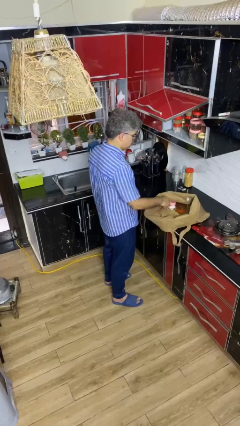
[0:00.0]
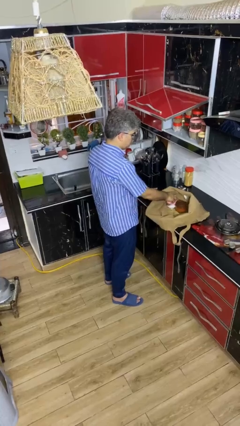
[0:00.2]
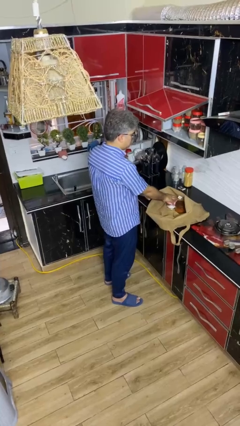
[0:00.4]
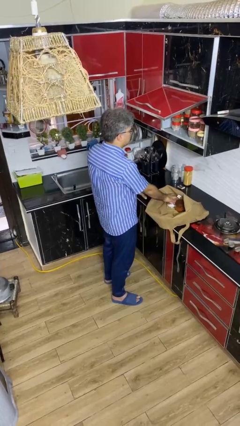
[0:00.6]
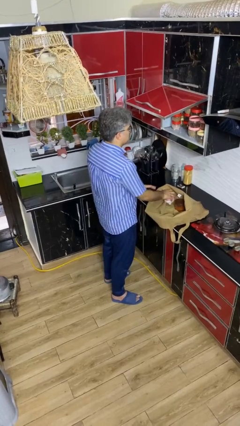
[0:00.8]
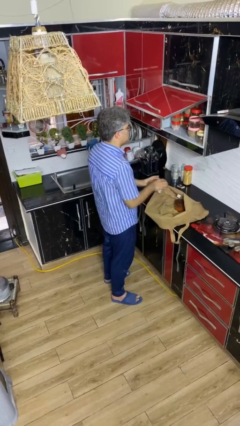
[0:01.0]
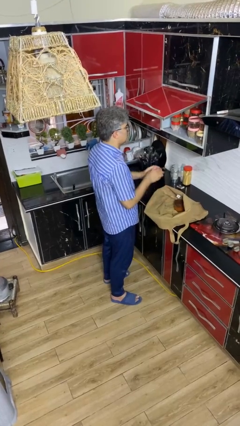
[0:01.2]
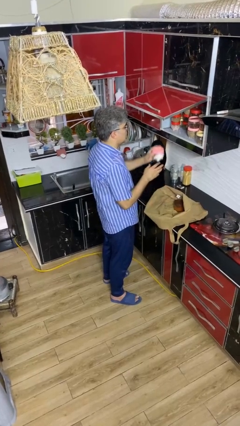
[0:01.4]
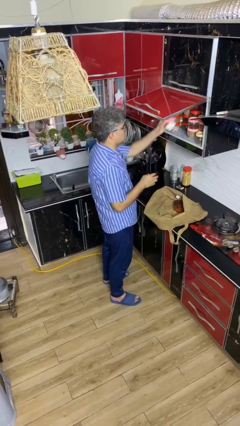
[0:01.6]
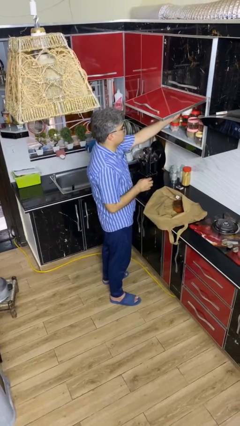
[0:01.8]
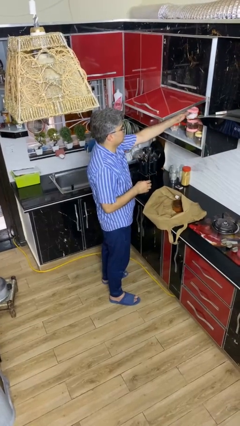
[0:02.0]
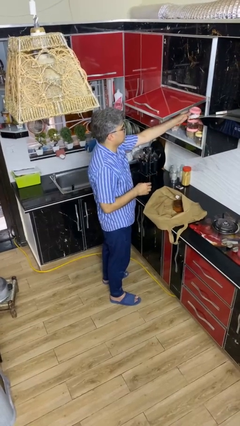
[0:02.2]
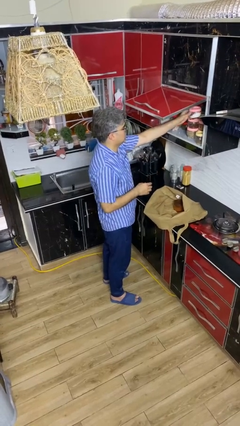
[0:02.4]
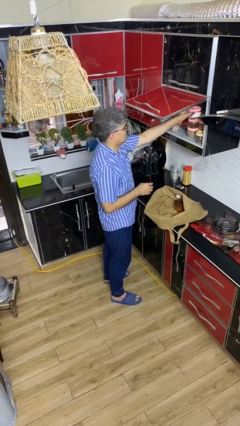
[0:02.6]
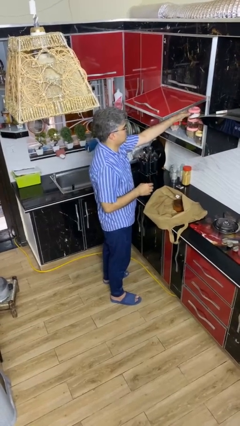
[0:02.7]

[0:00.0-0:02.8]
person loads groceries into cabinet

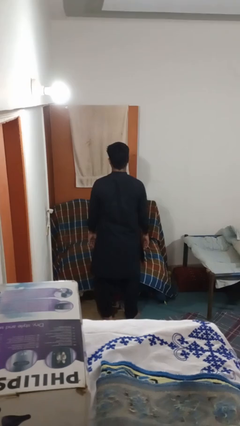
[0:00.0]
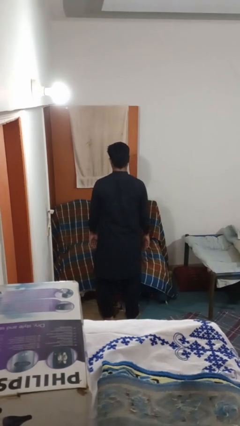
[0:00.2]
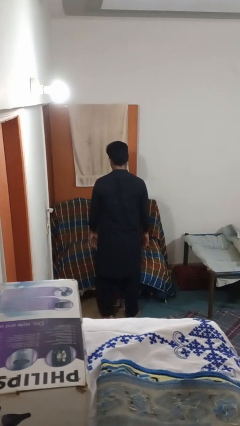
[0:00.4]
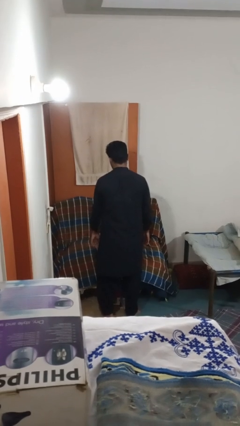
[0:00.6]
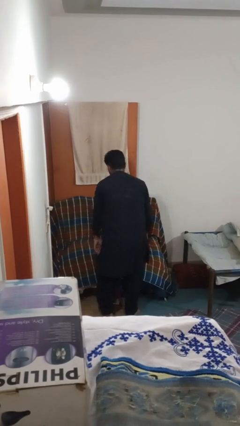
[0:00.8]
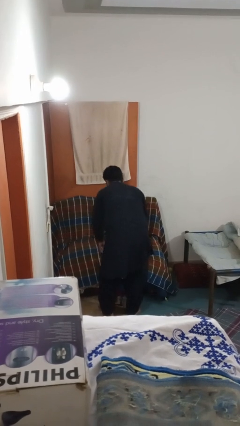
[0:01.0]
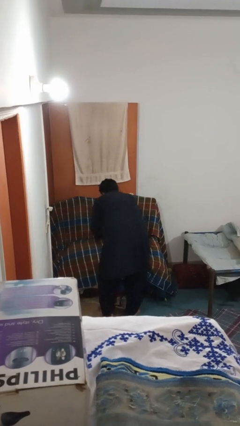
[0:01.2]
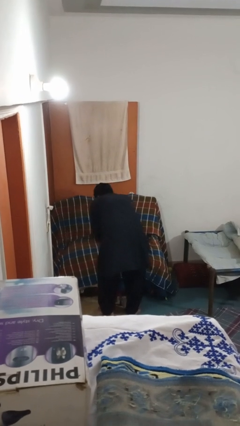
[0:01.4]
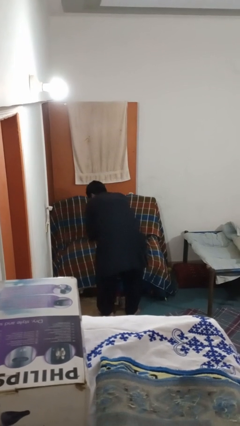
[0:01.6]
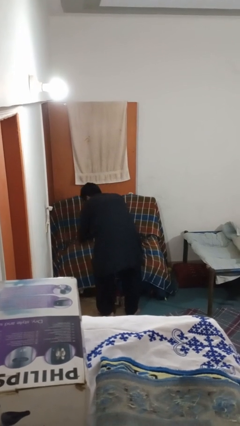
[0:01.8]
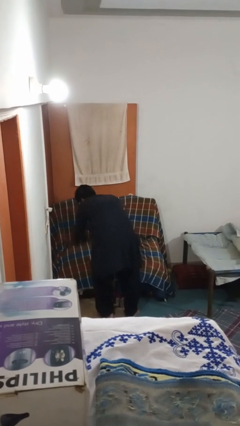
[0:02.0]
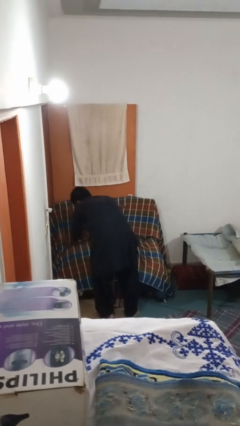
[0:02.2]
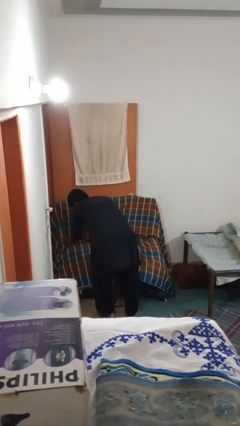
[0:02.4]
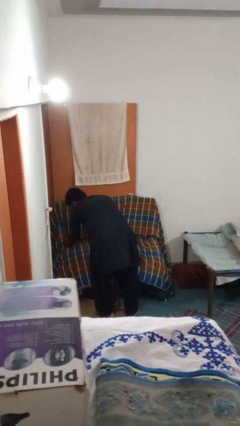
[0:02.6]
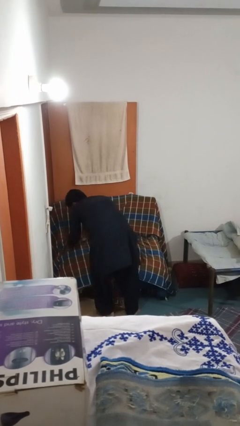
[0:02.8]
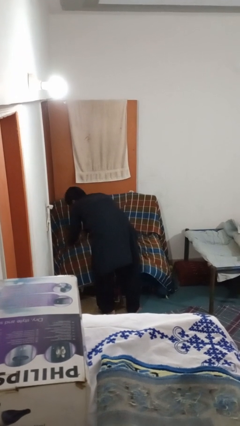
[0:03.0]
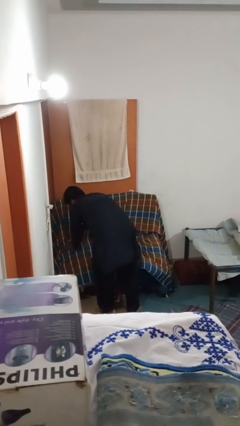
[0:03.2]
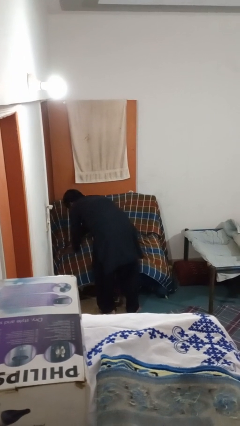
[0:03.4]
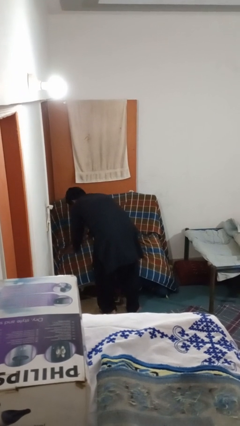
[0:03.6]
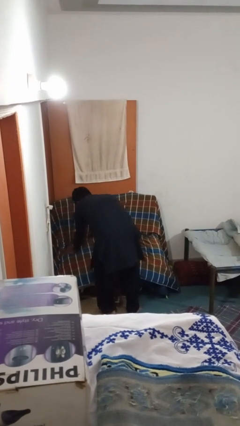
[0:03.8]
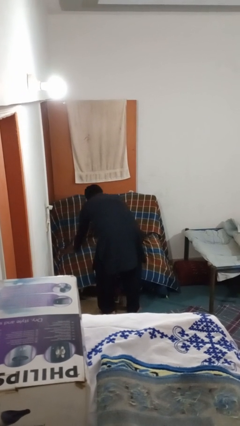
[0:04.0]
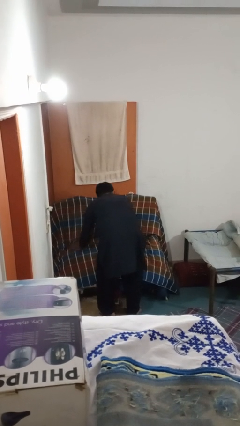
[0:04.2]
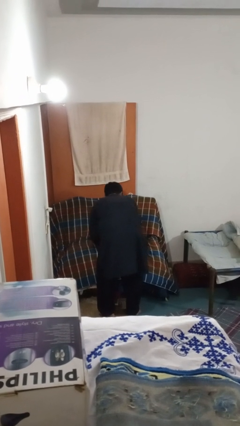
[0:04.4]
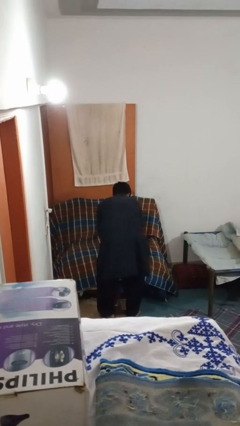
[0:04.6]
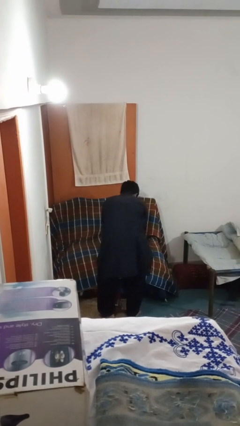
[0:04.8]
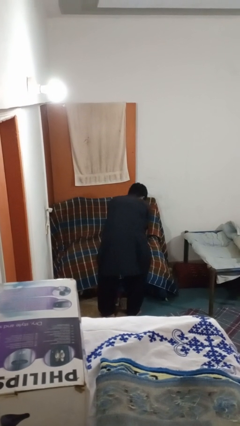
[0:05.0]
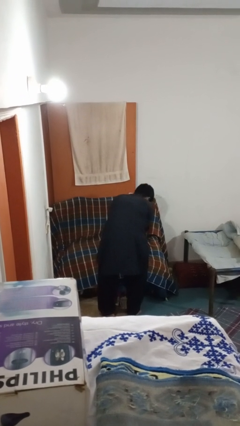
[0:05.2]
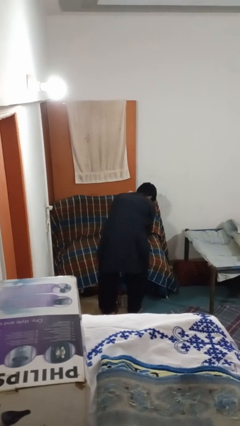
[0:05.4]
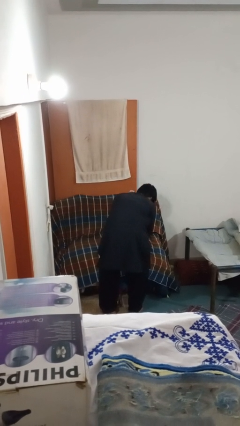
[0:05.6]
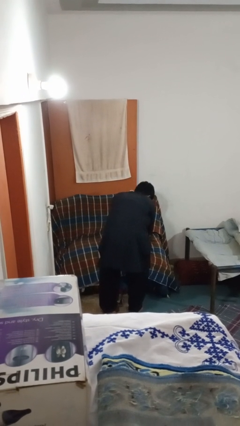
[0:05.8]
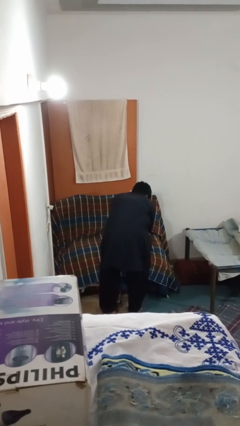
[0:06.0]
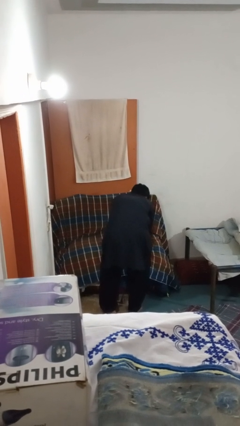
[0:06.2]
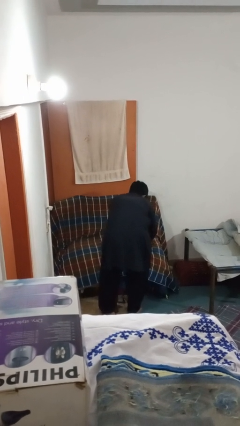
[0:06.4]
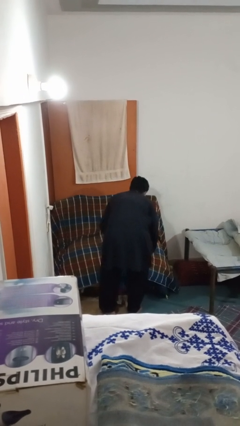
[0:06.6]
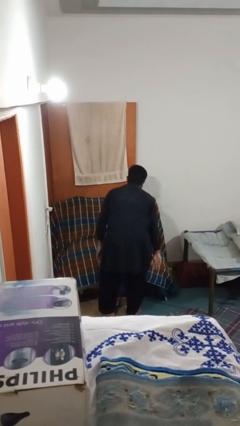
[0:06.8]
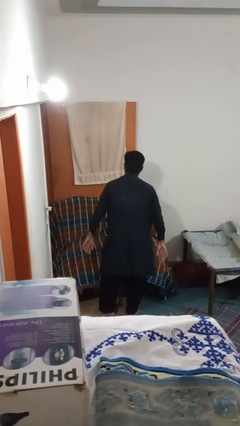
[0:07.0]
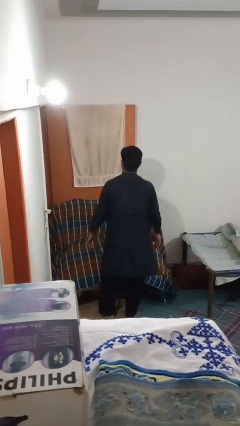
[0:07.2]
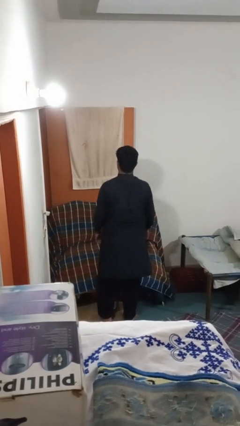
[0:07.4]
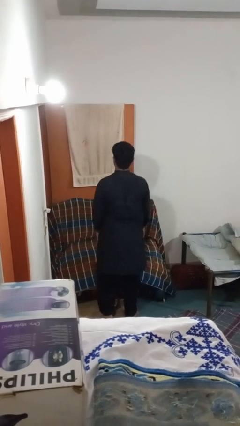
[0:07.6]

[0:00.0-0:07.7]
person searches in couch

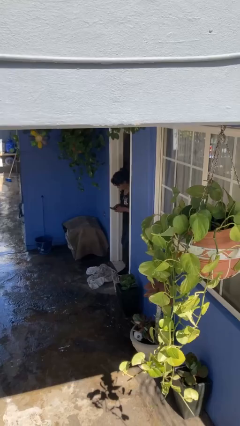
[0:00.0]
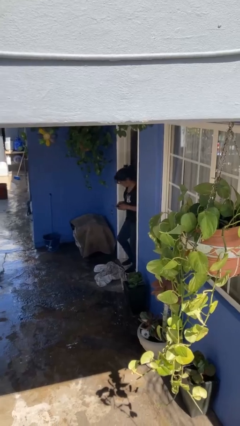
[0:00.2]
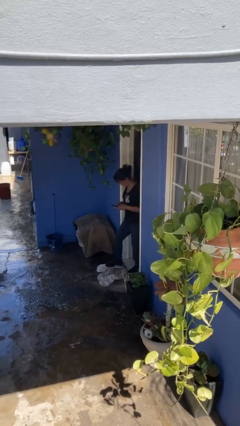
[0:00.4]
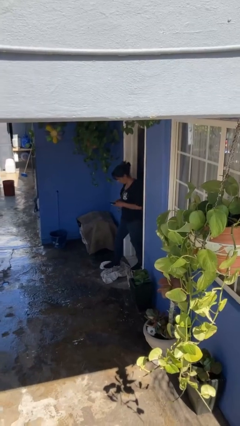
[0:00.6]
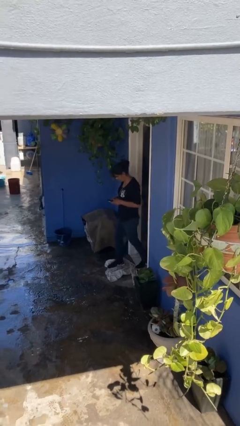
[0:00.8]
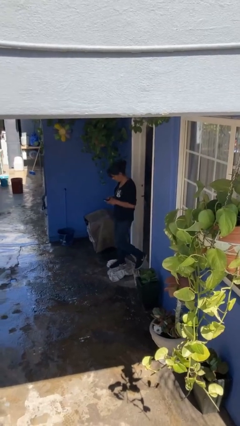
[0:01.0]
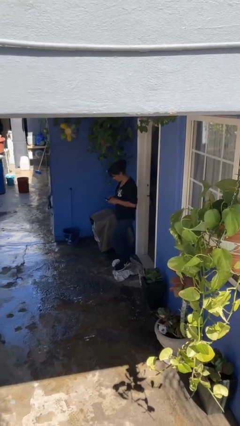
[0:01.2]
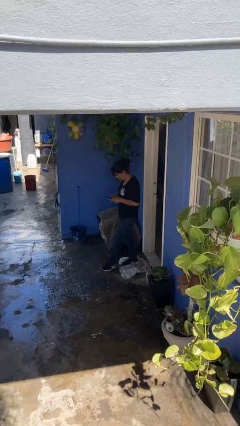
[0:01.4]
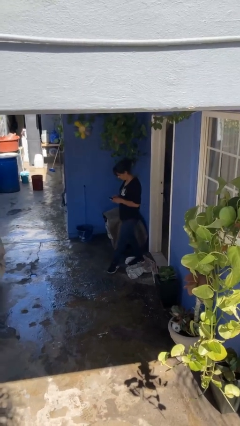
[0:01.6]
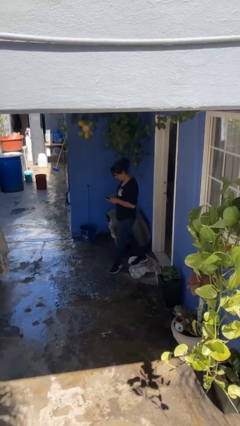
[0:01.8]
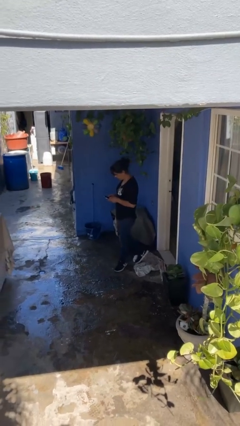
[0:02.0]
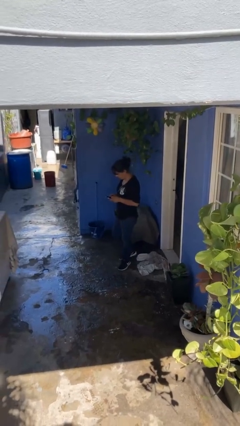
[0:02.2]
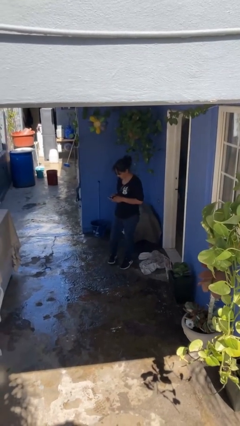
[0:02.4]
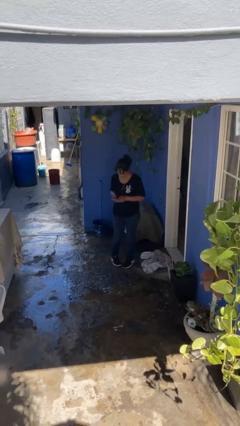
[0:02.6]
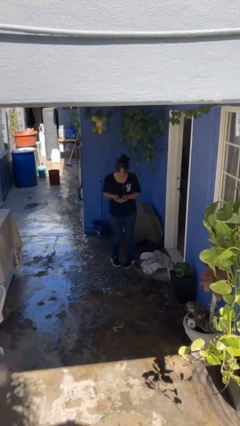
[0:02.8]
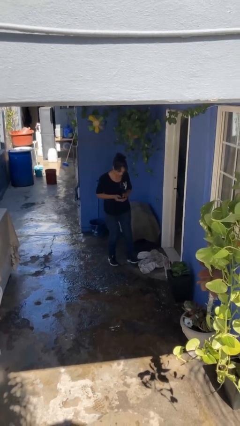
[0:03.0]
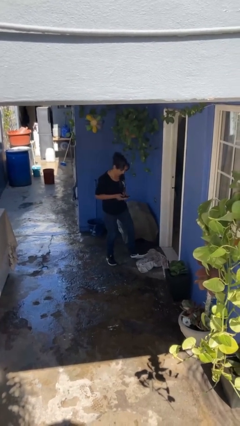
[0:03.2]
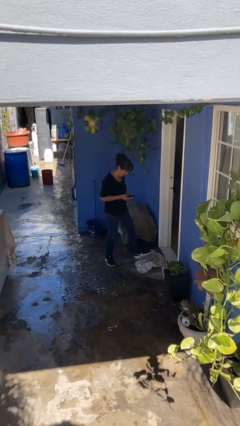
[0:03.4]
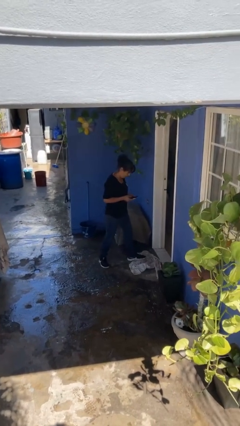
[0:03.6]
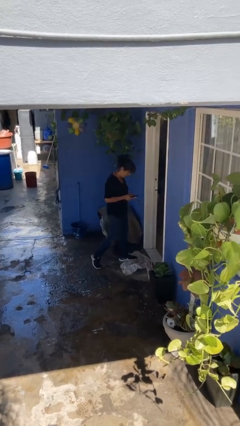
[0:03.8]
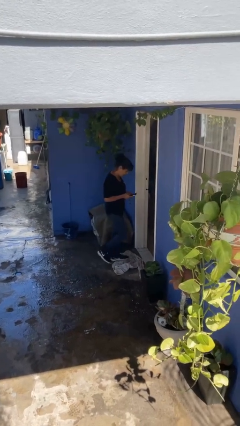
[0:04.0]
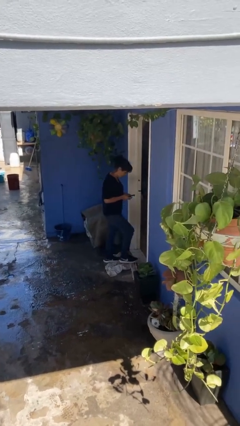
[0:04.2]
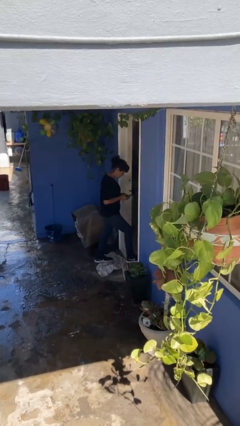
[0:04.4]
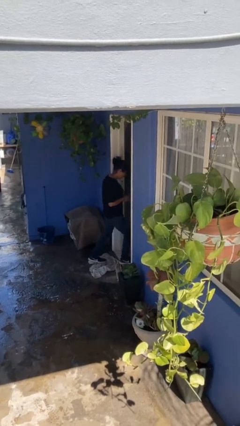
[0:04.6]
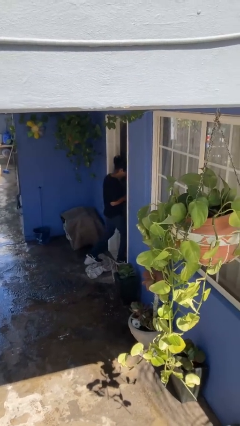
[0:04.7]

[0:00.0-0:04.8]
person enters scene through structure

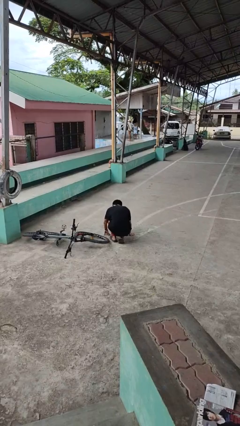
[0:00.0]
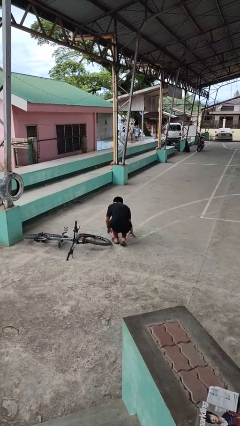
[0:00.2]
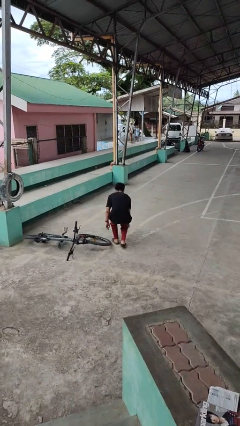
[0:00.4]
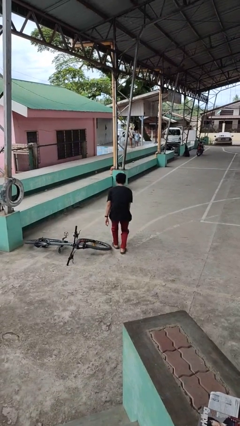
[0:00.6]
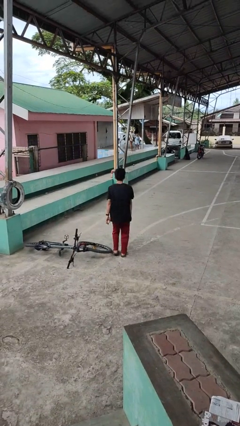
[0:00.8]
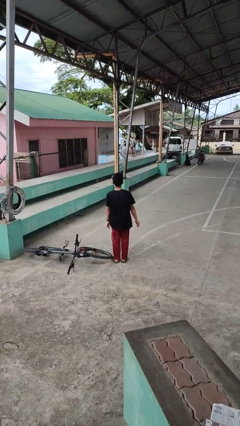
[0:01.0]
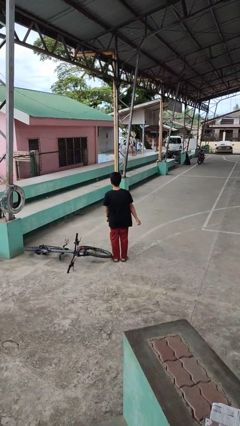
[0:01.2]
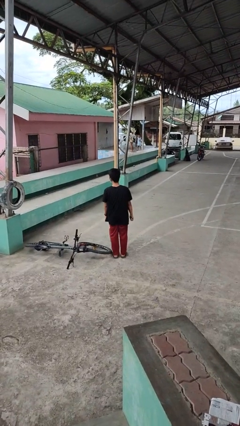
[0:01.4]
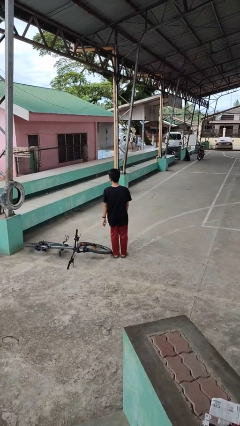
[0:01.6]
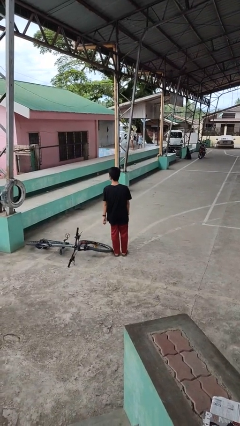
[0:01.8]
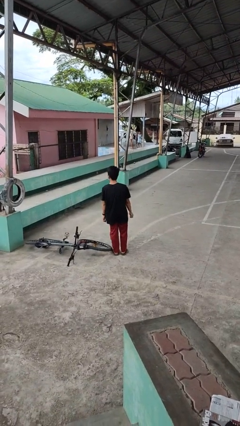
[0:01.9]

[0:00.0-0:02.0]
person stands up from floor

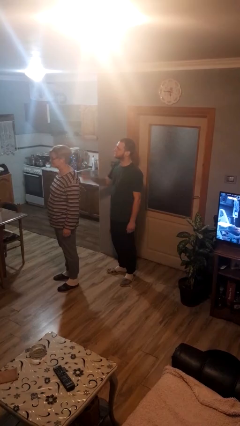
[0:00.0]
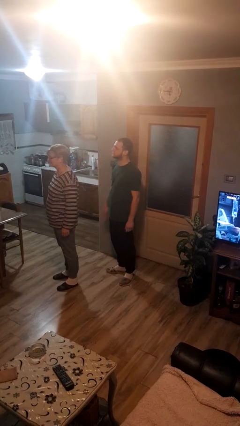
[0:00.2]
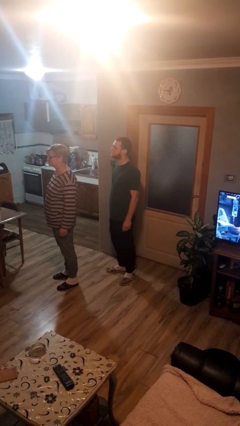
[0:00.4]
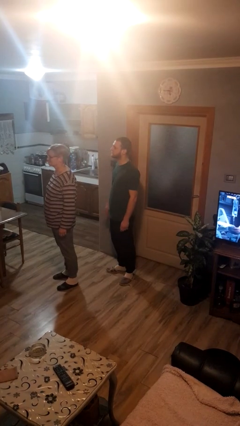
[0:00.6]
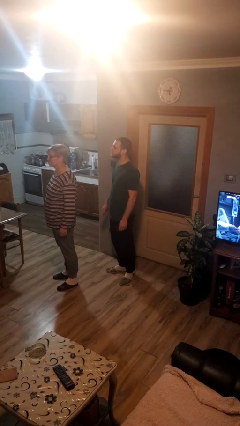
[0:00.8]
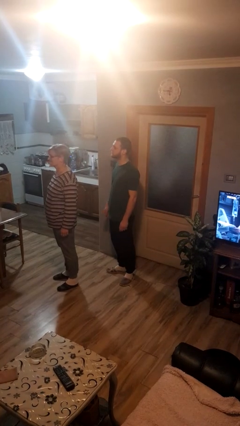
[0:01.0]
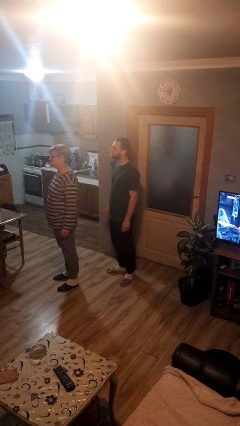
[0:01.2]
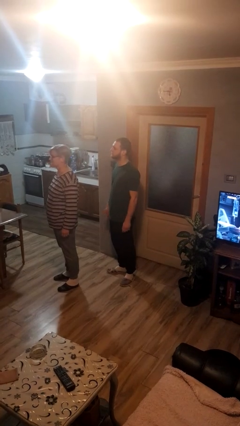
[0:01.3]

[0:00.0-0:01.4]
person grabs person by hair
